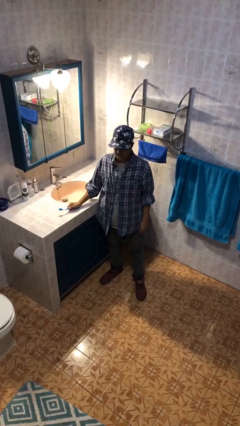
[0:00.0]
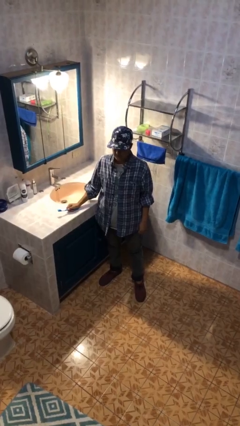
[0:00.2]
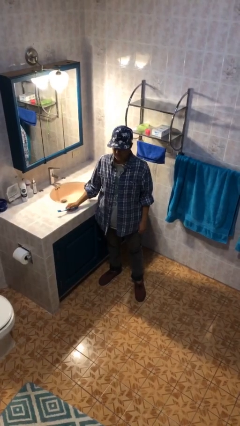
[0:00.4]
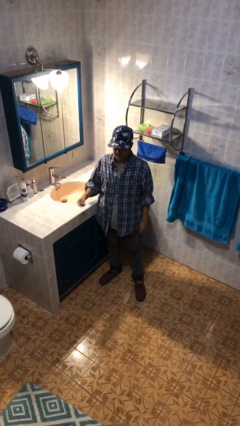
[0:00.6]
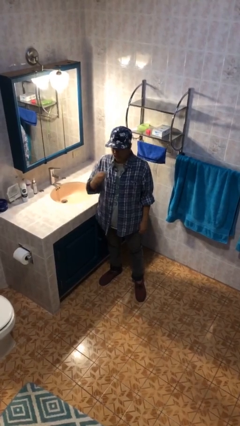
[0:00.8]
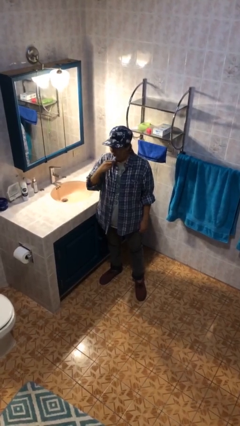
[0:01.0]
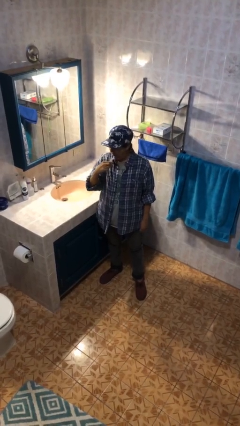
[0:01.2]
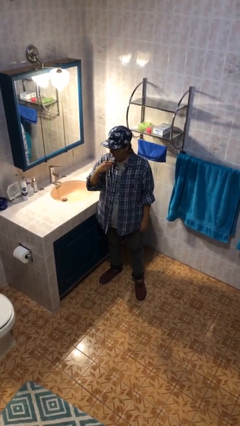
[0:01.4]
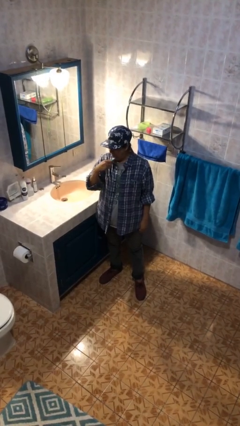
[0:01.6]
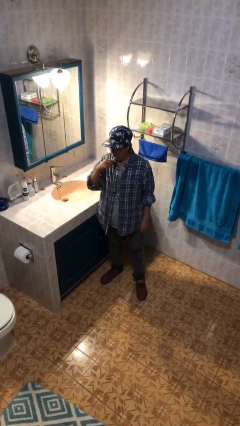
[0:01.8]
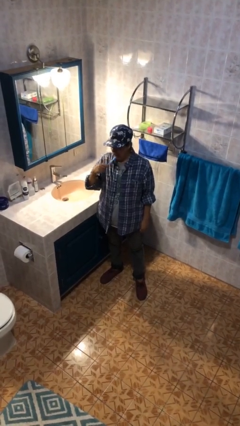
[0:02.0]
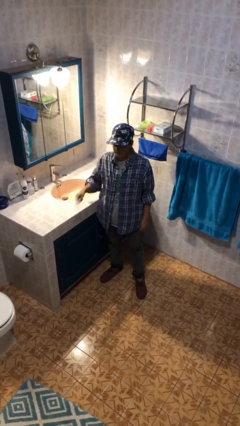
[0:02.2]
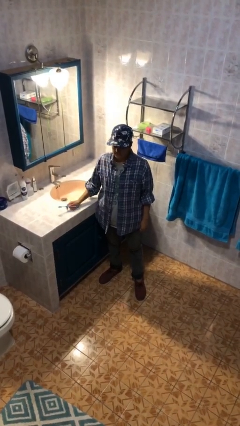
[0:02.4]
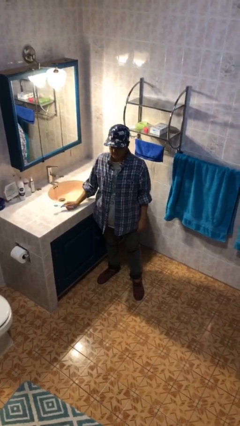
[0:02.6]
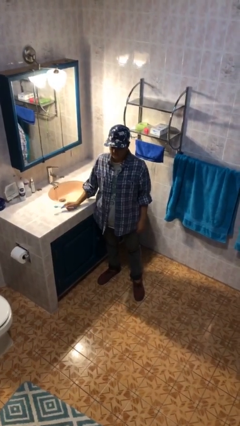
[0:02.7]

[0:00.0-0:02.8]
person brushes teeth

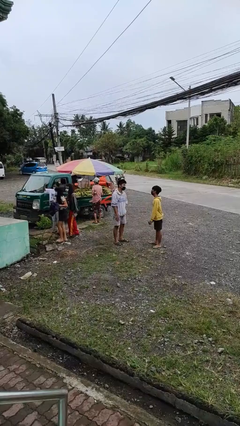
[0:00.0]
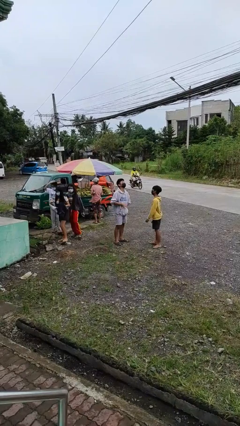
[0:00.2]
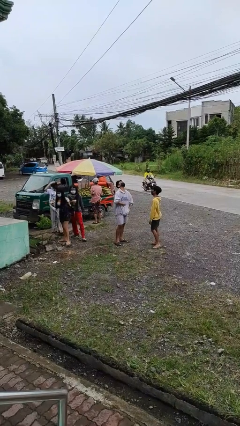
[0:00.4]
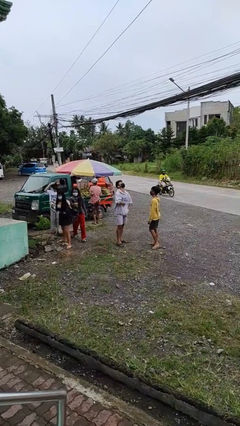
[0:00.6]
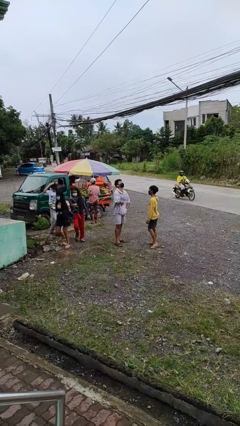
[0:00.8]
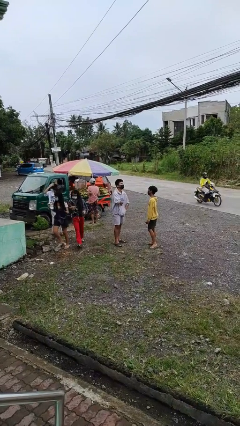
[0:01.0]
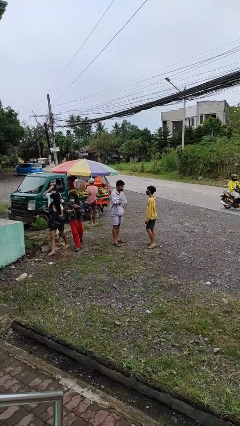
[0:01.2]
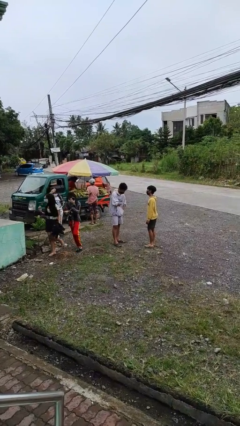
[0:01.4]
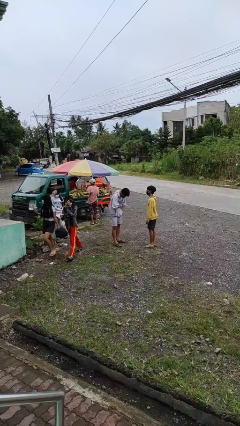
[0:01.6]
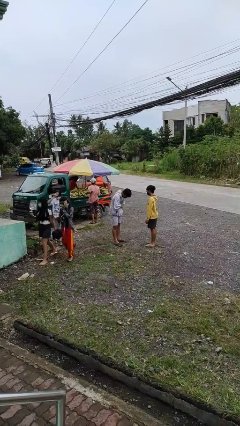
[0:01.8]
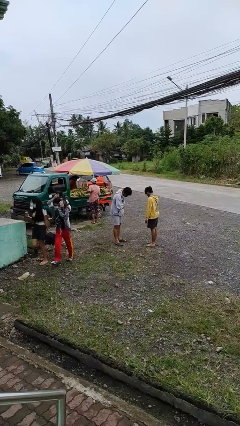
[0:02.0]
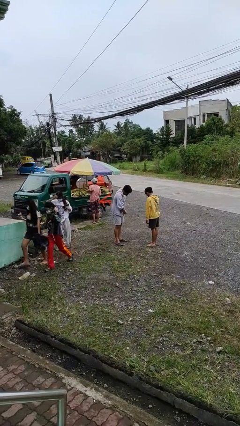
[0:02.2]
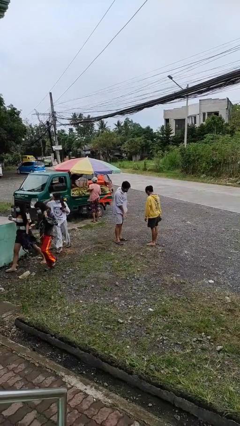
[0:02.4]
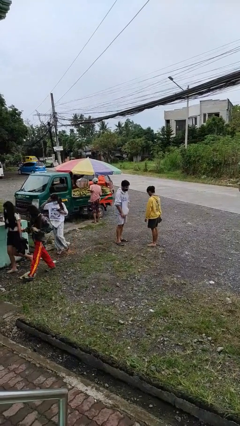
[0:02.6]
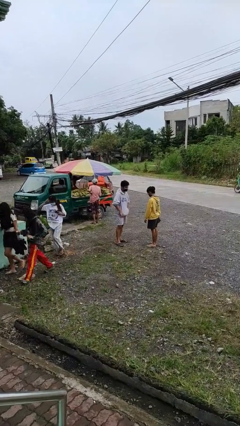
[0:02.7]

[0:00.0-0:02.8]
person laughs with person

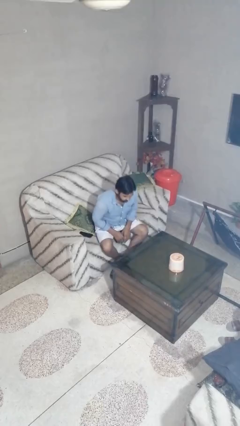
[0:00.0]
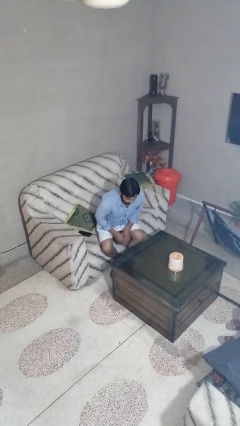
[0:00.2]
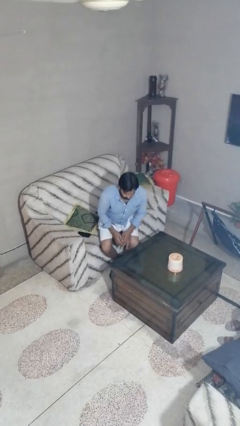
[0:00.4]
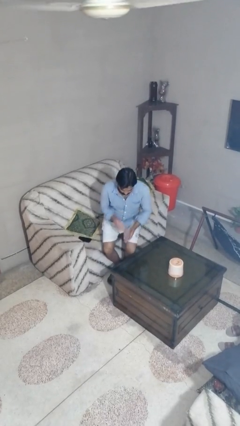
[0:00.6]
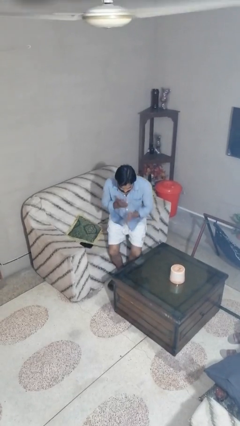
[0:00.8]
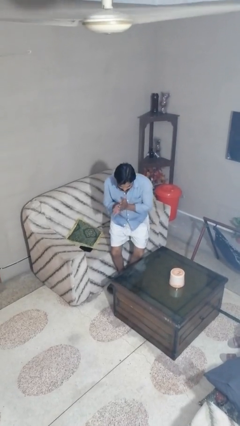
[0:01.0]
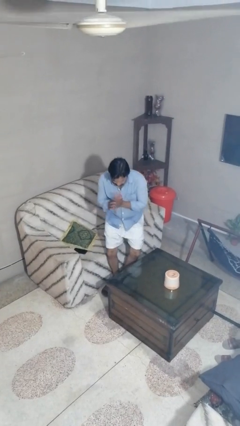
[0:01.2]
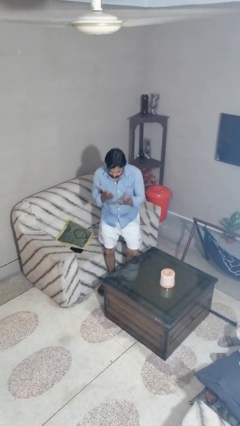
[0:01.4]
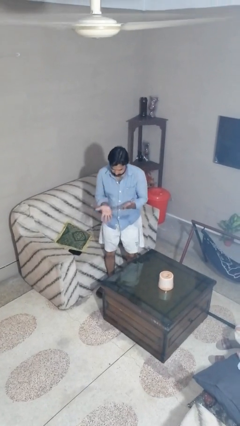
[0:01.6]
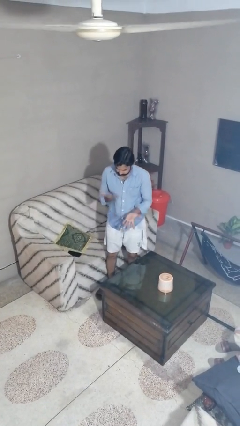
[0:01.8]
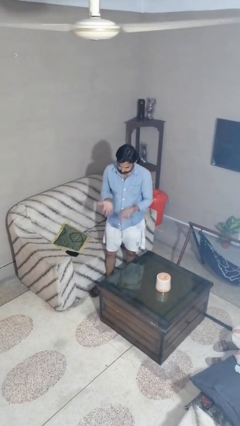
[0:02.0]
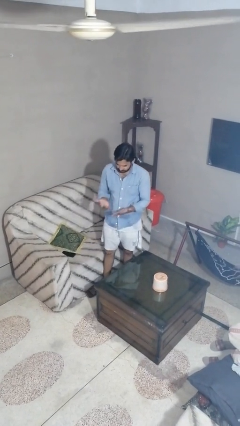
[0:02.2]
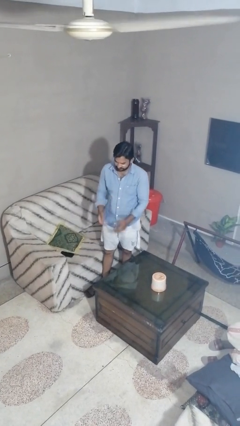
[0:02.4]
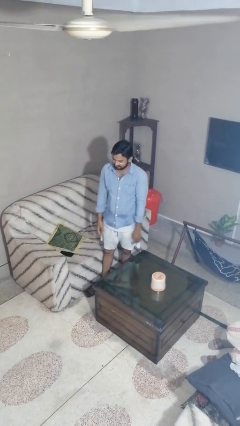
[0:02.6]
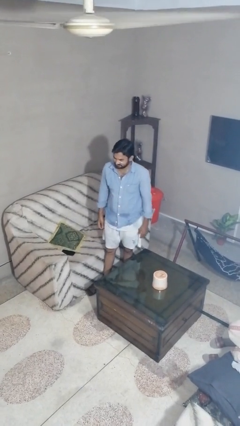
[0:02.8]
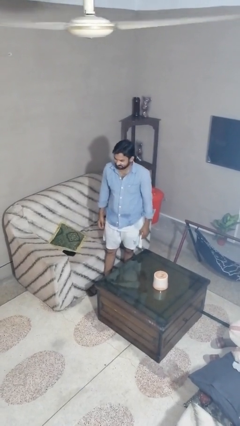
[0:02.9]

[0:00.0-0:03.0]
person blows into hands

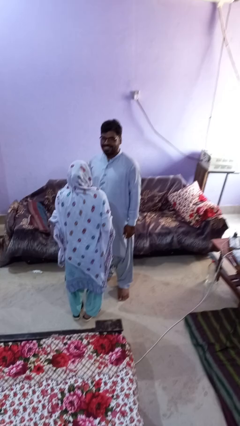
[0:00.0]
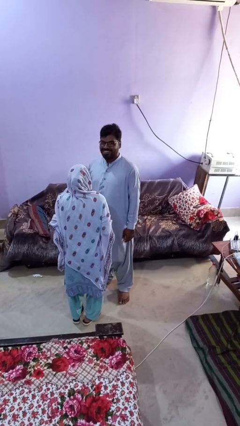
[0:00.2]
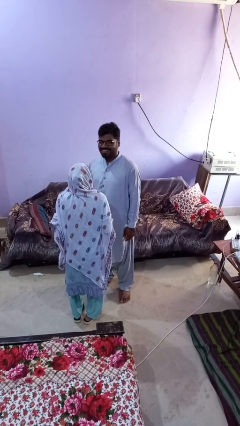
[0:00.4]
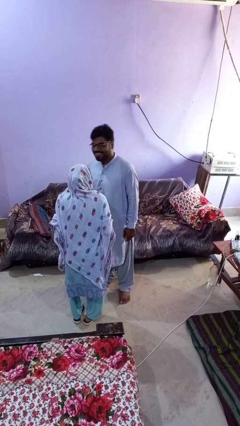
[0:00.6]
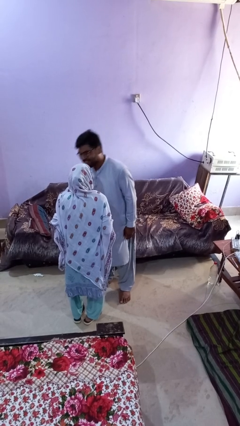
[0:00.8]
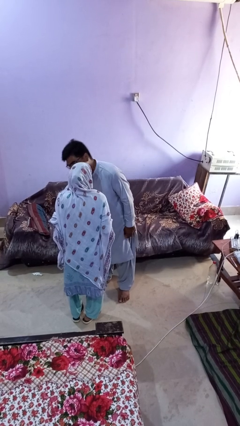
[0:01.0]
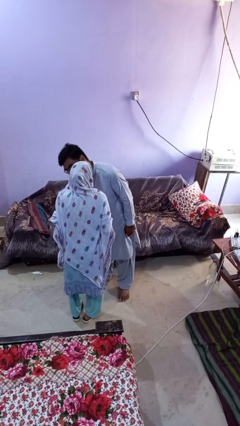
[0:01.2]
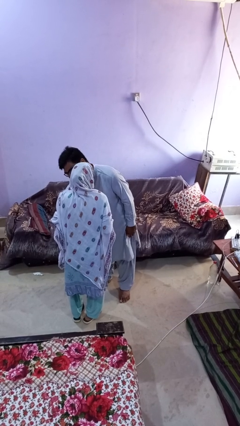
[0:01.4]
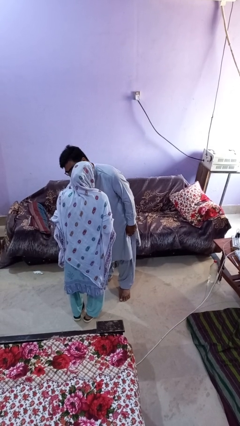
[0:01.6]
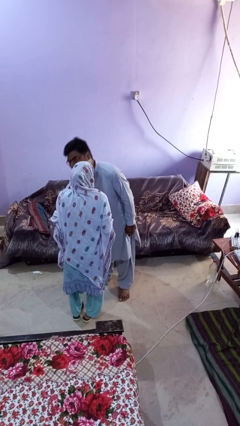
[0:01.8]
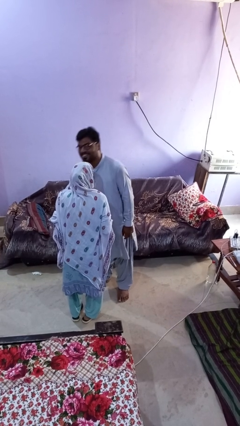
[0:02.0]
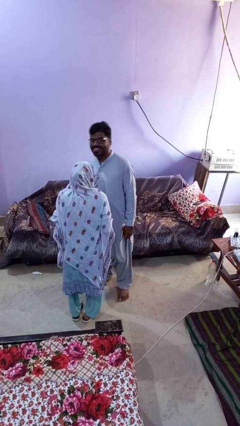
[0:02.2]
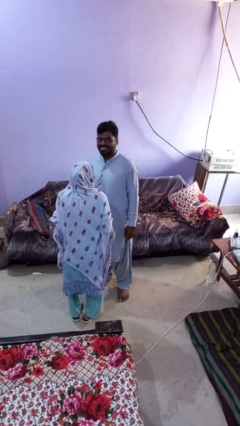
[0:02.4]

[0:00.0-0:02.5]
person kisses cheek of person

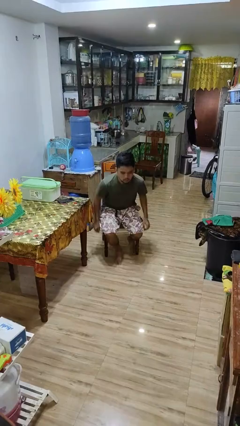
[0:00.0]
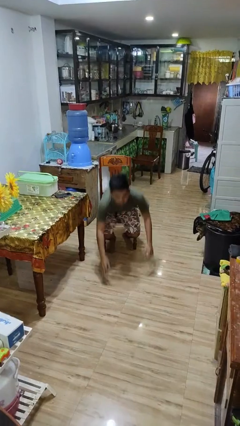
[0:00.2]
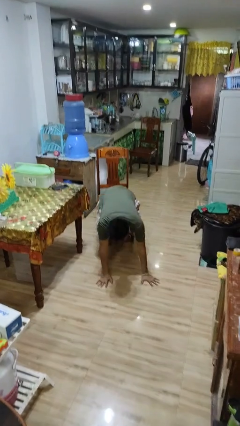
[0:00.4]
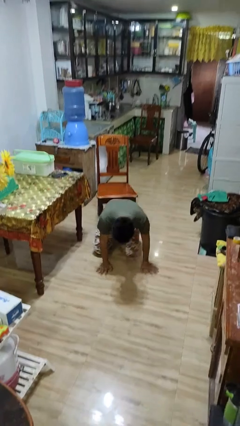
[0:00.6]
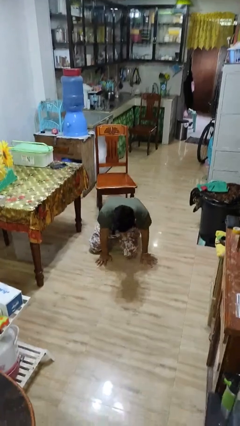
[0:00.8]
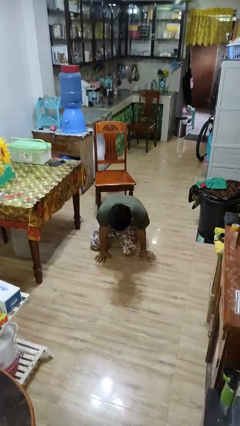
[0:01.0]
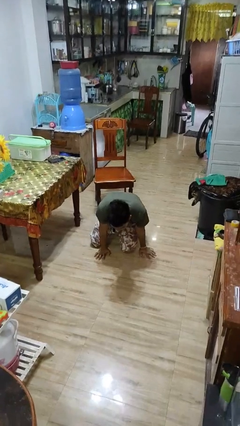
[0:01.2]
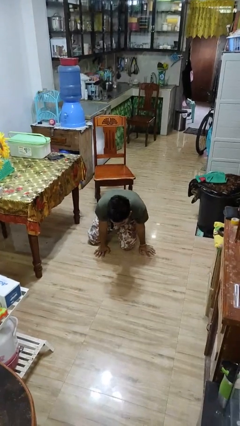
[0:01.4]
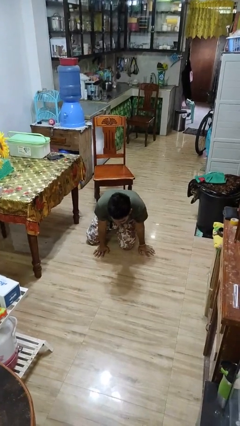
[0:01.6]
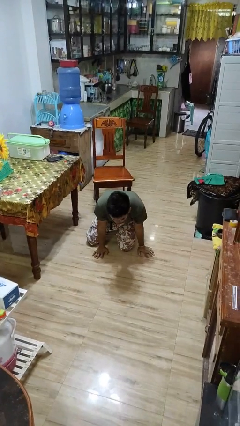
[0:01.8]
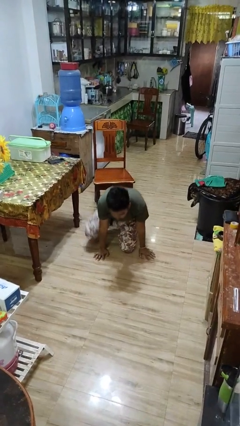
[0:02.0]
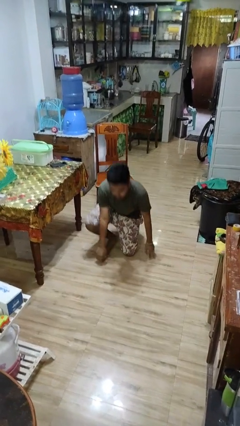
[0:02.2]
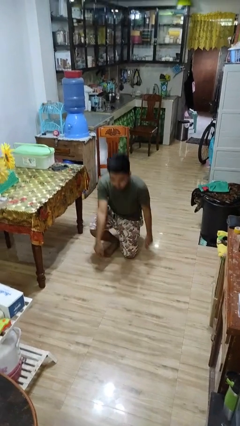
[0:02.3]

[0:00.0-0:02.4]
person falls from chair

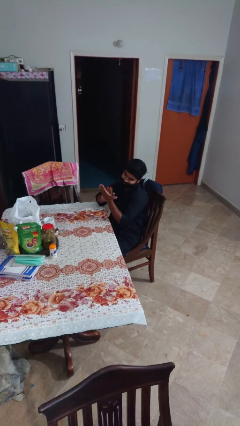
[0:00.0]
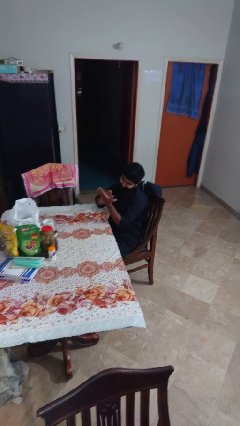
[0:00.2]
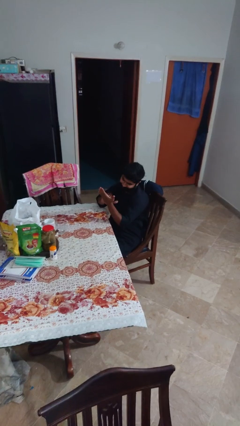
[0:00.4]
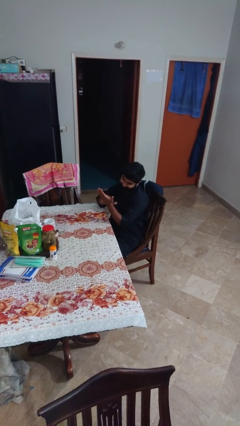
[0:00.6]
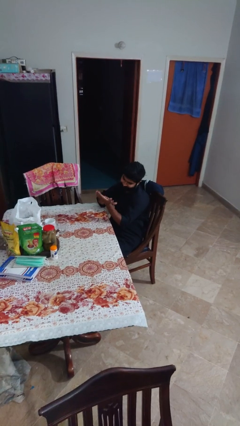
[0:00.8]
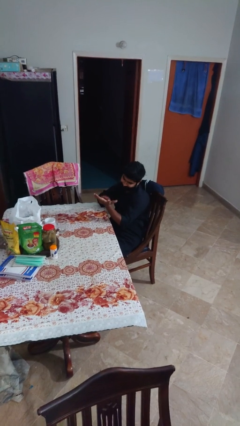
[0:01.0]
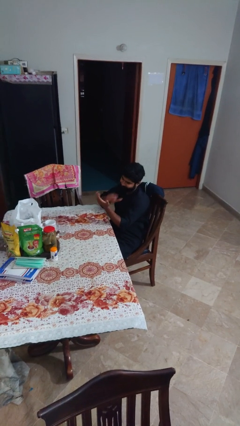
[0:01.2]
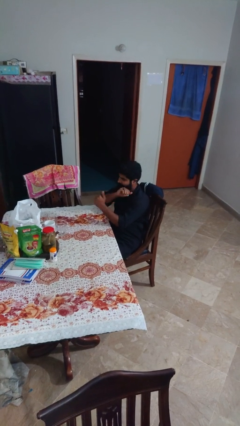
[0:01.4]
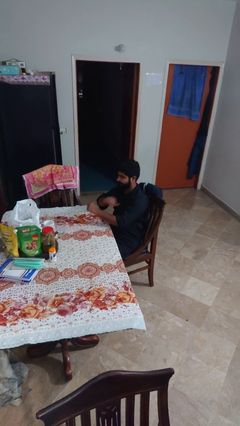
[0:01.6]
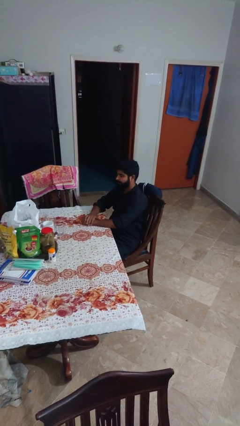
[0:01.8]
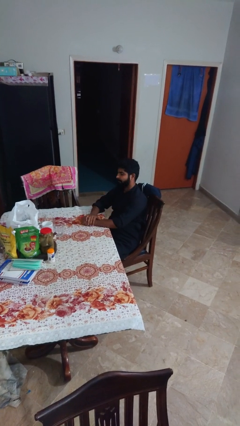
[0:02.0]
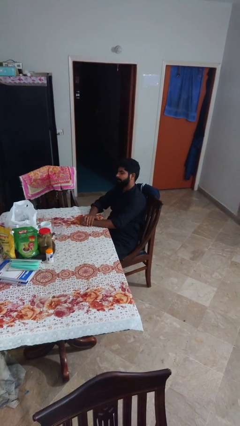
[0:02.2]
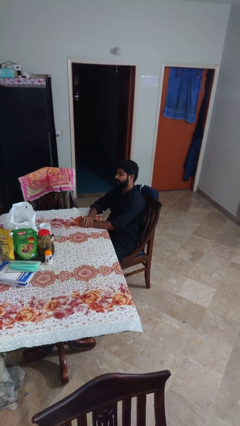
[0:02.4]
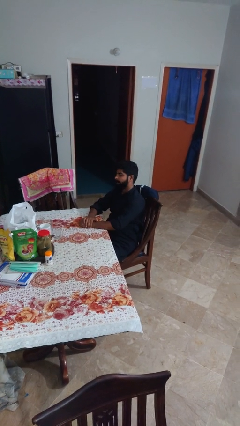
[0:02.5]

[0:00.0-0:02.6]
person claps hands

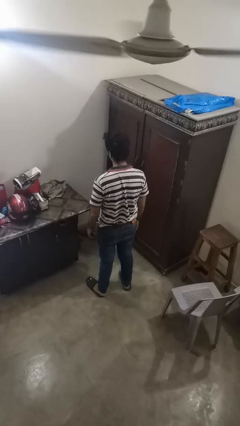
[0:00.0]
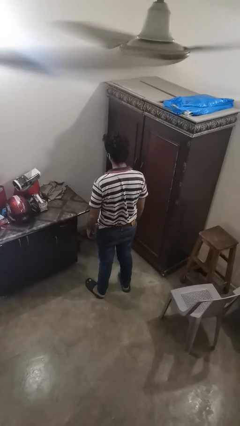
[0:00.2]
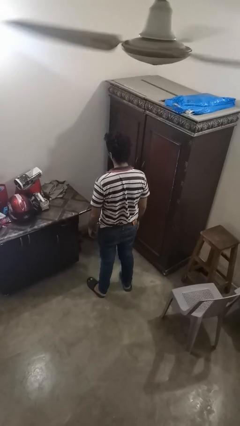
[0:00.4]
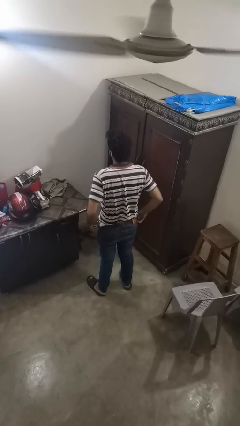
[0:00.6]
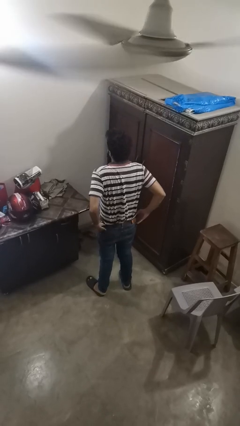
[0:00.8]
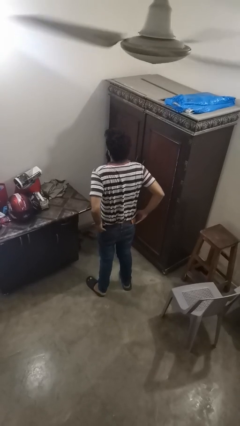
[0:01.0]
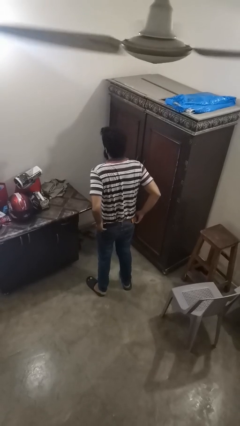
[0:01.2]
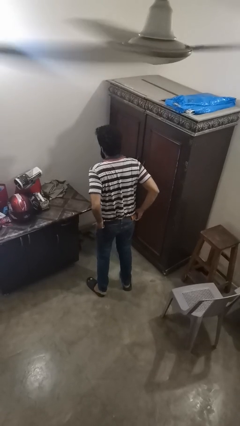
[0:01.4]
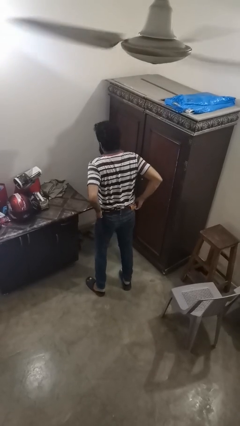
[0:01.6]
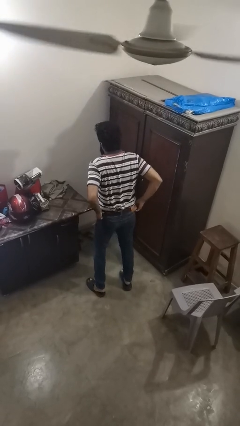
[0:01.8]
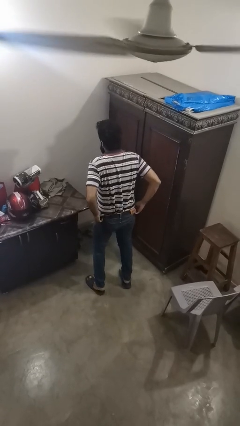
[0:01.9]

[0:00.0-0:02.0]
person hikes up pants
